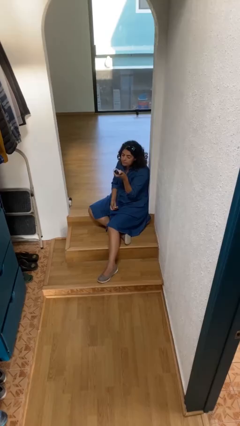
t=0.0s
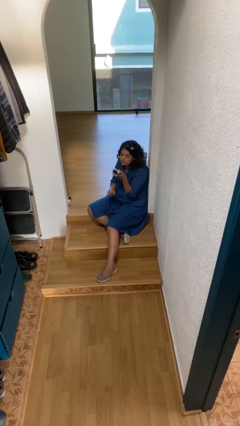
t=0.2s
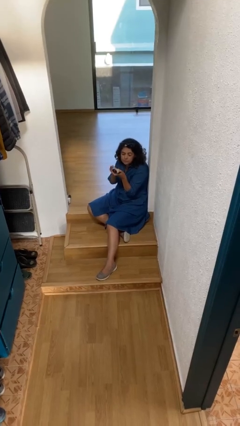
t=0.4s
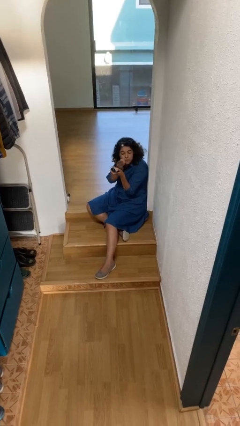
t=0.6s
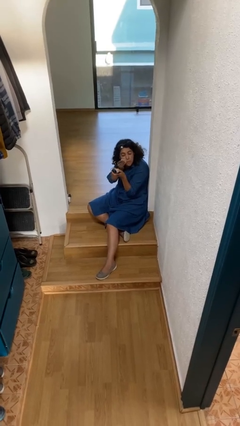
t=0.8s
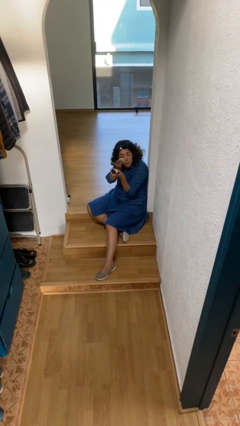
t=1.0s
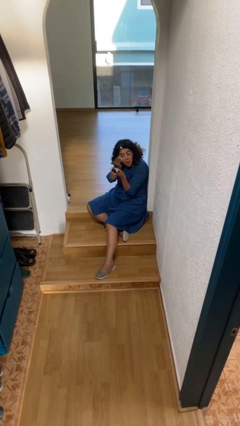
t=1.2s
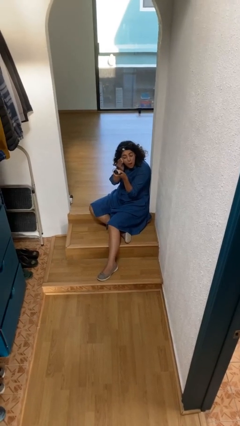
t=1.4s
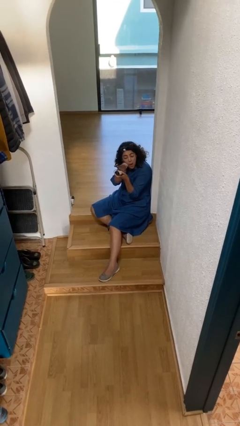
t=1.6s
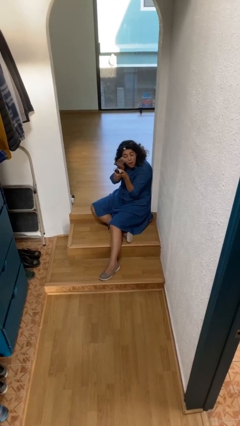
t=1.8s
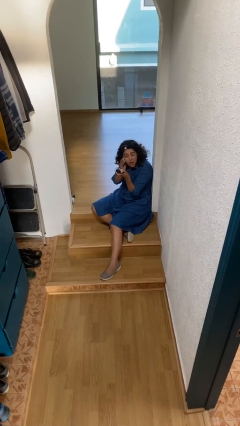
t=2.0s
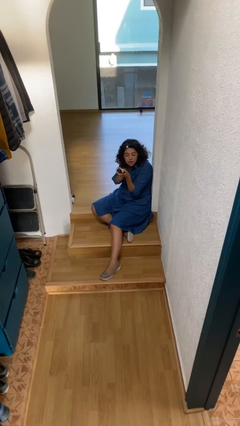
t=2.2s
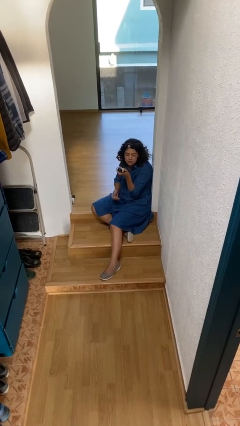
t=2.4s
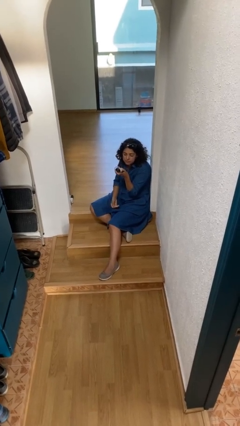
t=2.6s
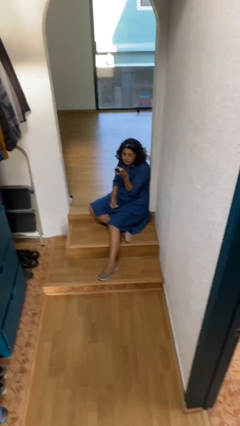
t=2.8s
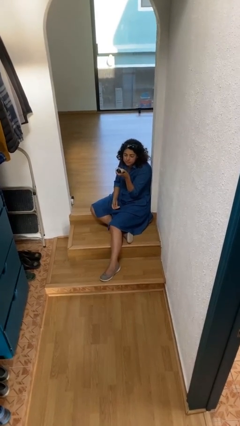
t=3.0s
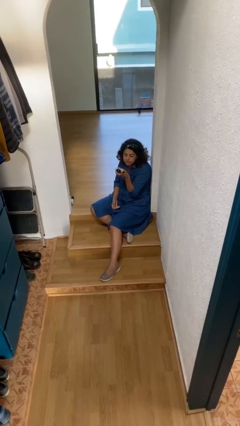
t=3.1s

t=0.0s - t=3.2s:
person applies foundation makeup

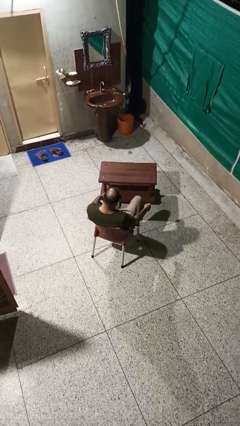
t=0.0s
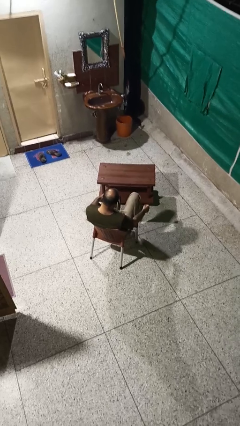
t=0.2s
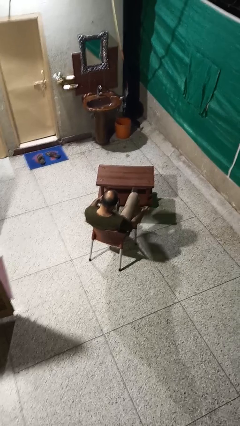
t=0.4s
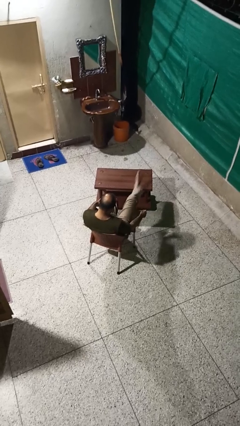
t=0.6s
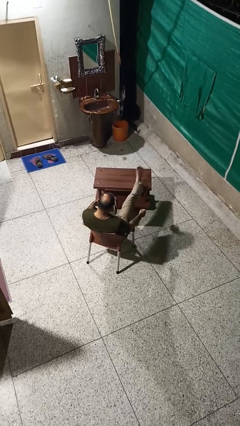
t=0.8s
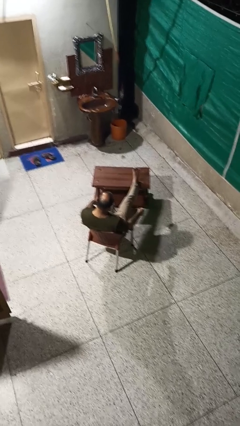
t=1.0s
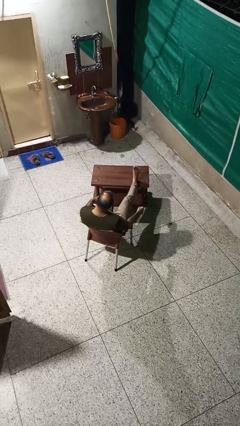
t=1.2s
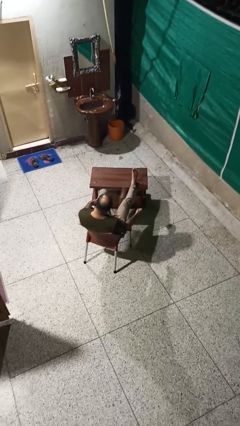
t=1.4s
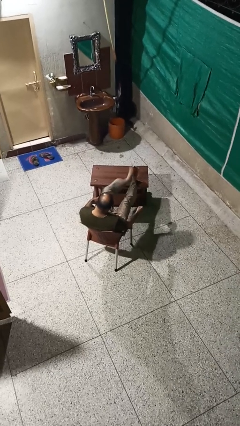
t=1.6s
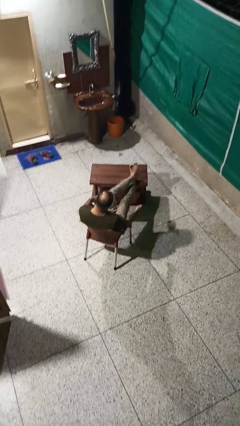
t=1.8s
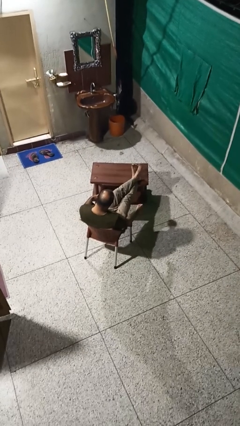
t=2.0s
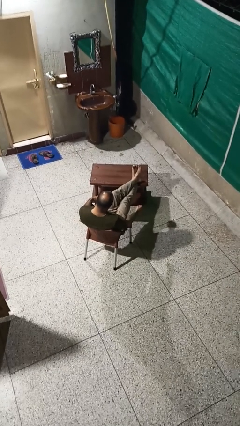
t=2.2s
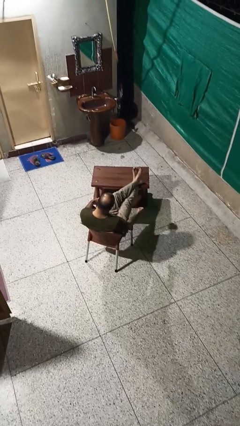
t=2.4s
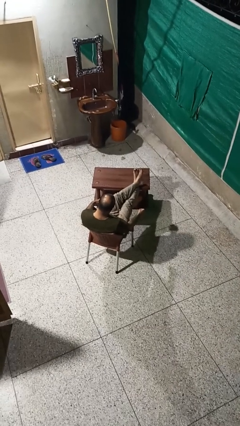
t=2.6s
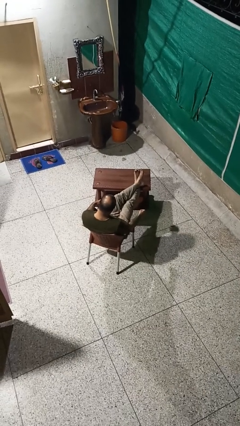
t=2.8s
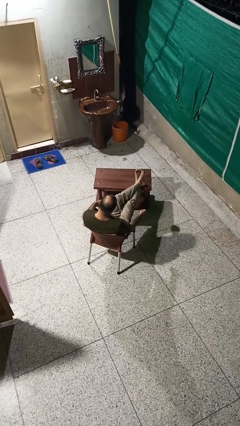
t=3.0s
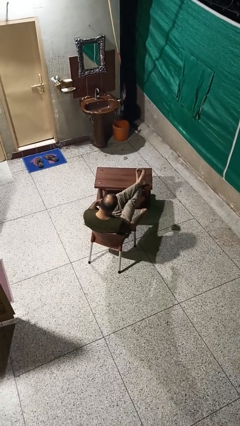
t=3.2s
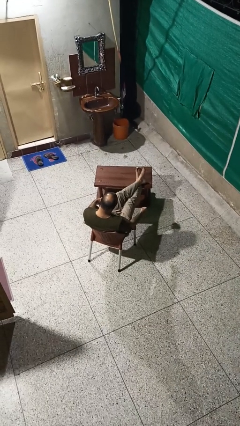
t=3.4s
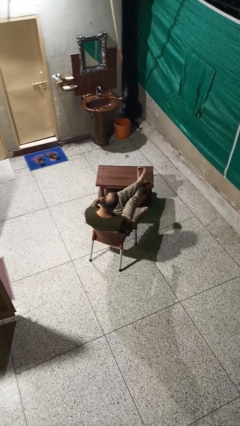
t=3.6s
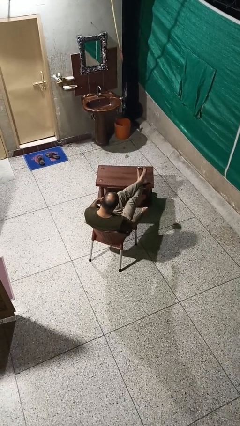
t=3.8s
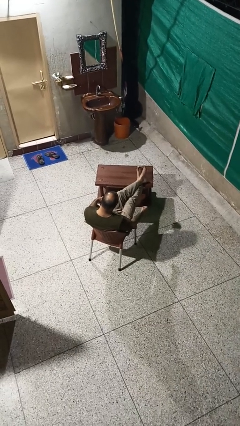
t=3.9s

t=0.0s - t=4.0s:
person puts feet up

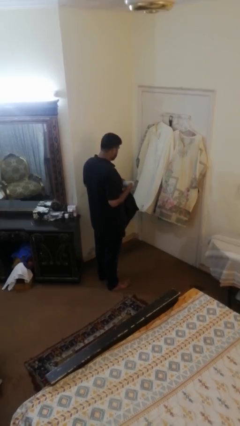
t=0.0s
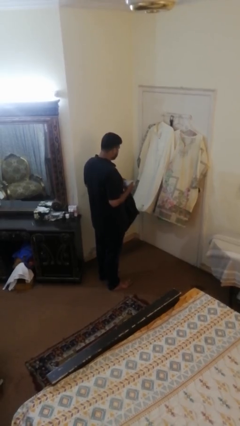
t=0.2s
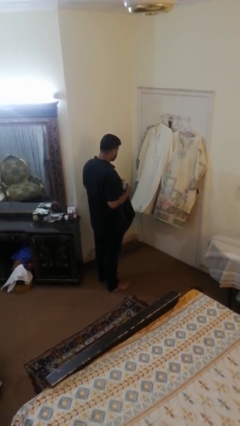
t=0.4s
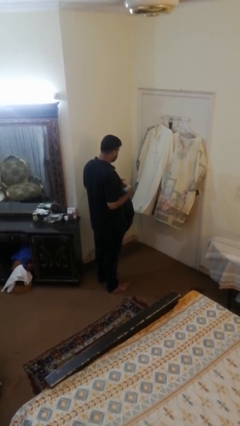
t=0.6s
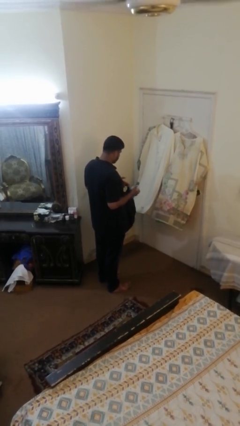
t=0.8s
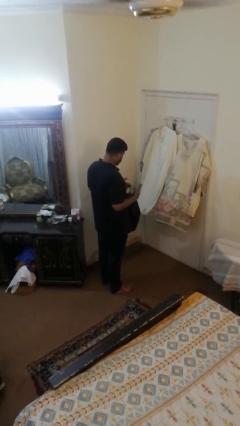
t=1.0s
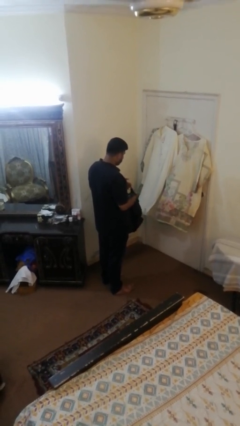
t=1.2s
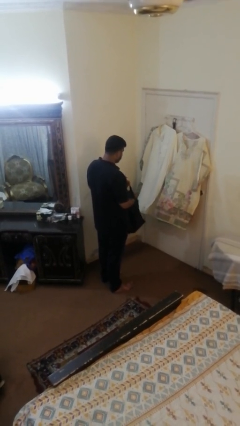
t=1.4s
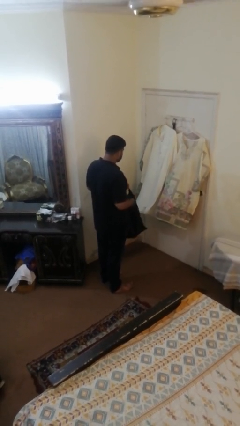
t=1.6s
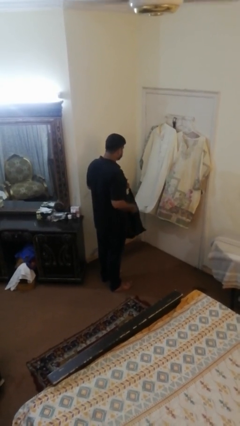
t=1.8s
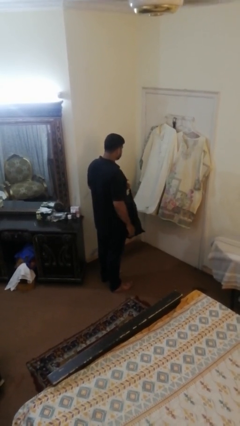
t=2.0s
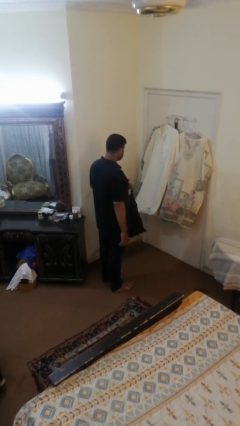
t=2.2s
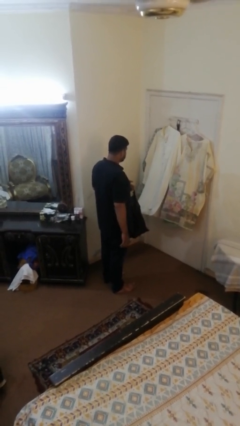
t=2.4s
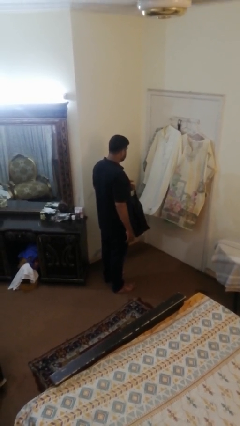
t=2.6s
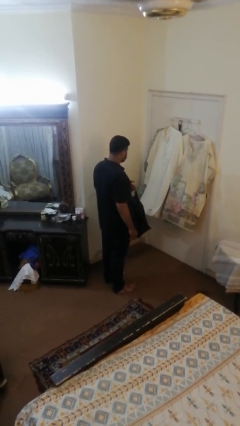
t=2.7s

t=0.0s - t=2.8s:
person puts object into bag

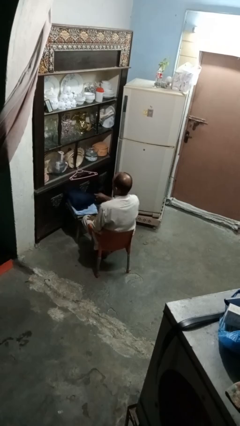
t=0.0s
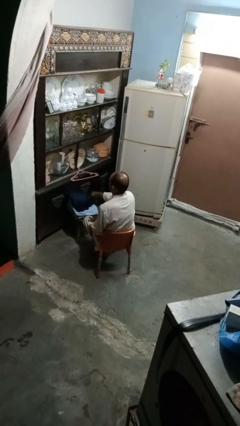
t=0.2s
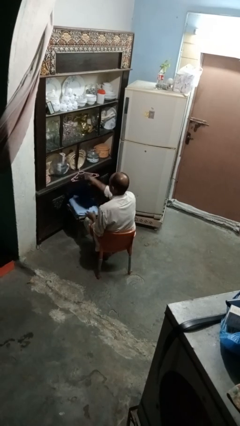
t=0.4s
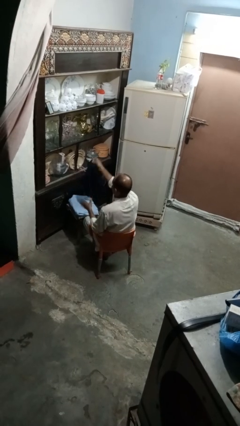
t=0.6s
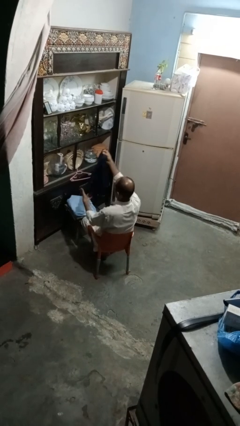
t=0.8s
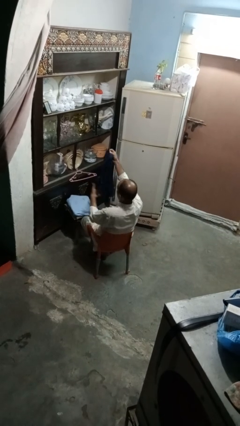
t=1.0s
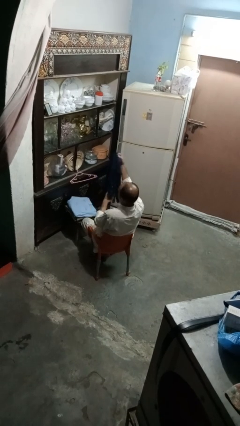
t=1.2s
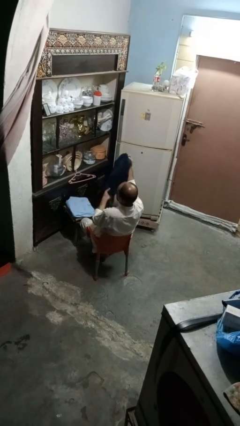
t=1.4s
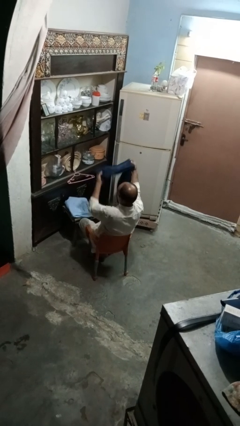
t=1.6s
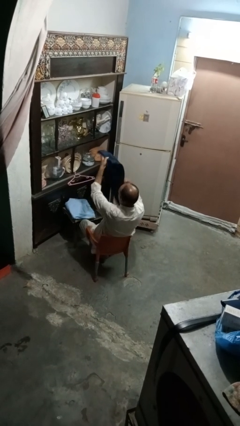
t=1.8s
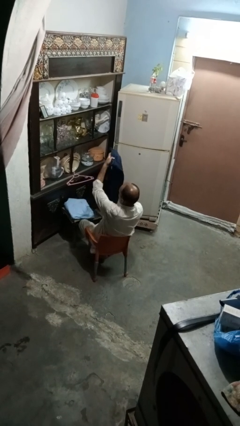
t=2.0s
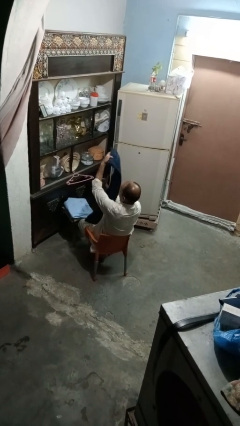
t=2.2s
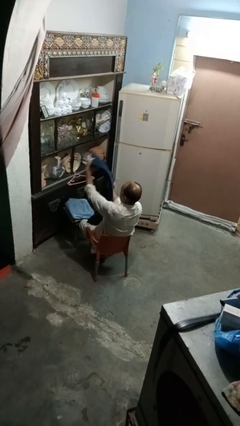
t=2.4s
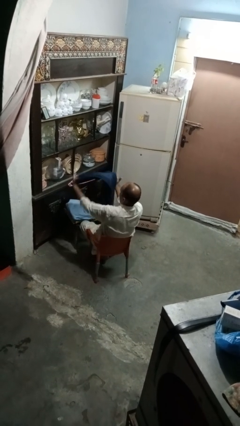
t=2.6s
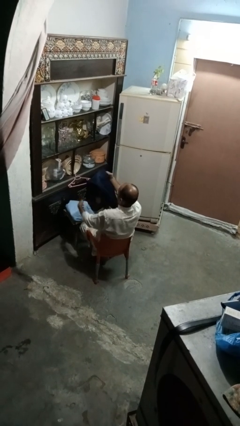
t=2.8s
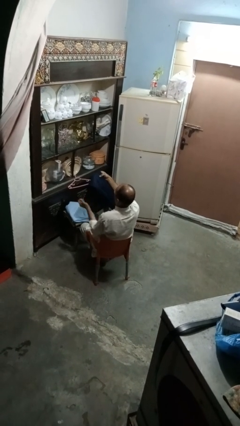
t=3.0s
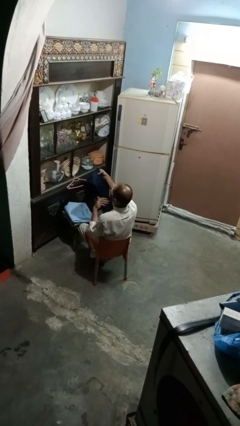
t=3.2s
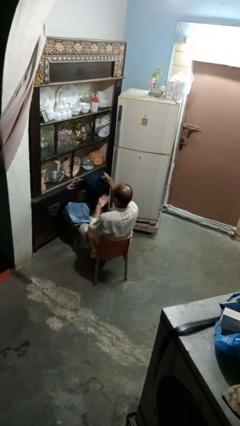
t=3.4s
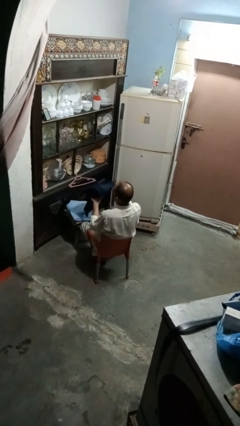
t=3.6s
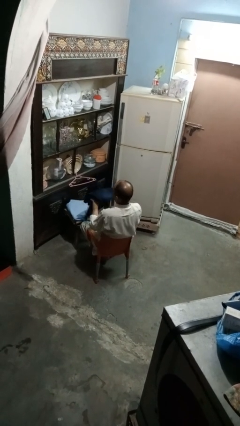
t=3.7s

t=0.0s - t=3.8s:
person folds pants

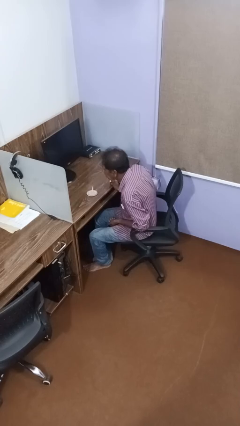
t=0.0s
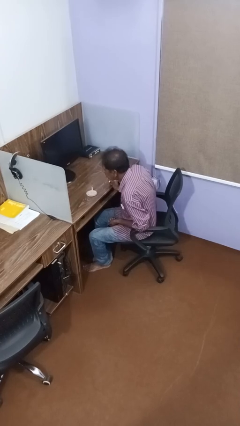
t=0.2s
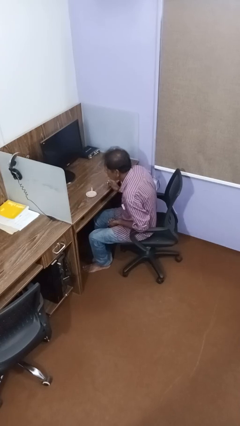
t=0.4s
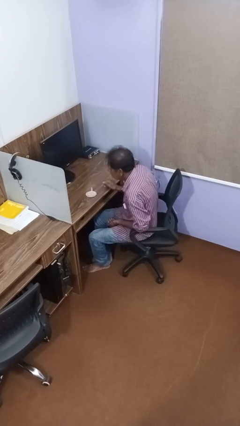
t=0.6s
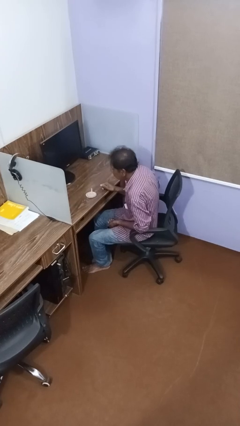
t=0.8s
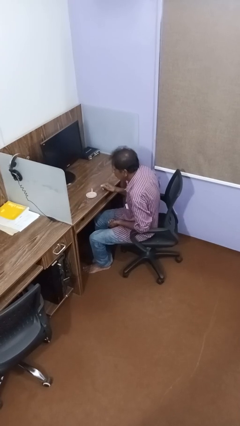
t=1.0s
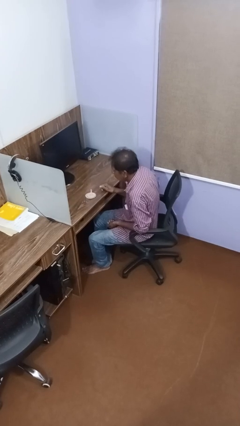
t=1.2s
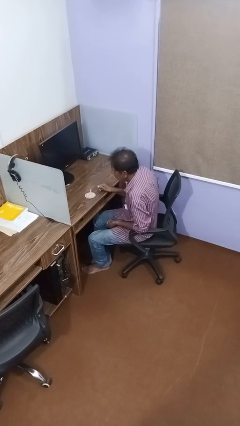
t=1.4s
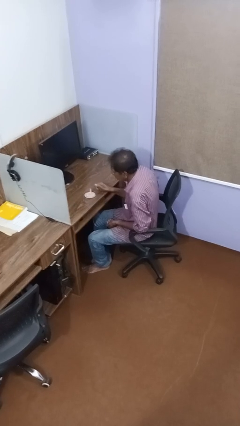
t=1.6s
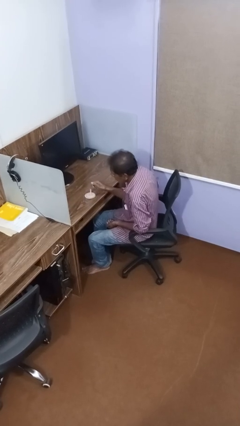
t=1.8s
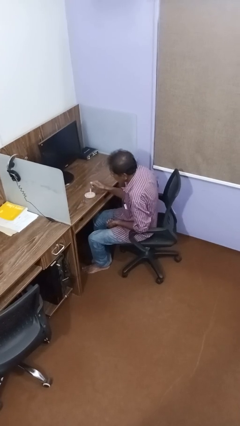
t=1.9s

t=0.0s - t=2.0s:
person extinguishes candle

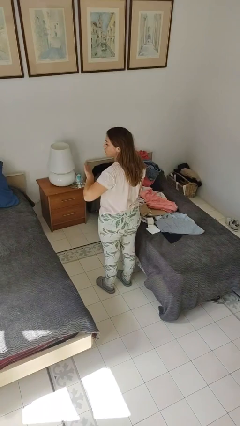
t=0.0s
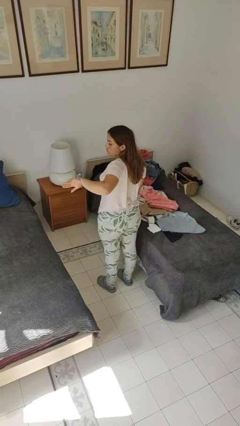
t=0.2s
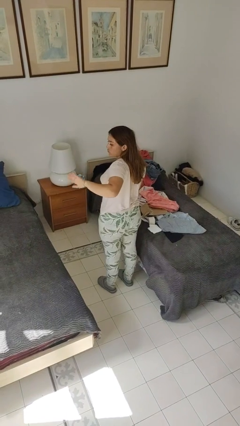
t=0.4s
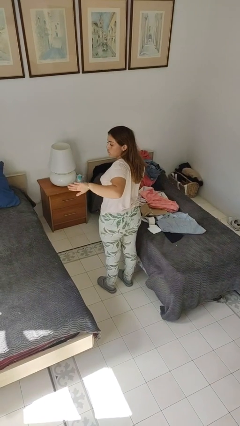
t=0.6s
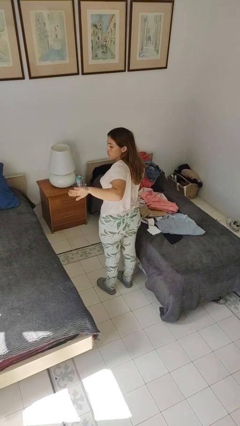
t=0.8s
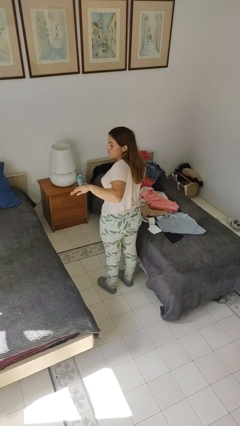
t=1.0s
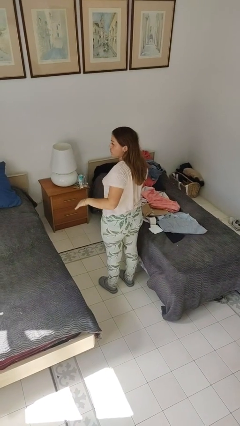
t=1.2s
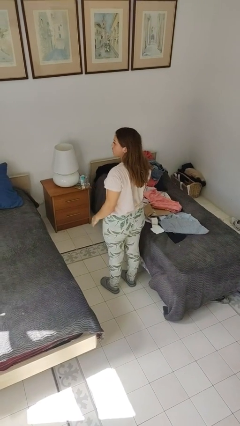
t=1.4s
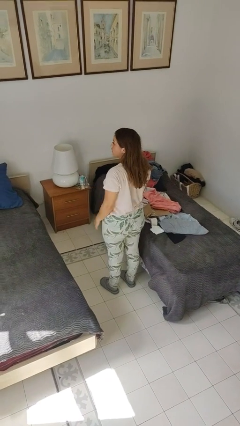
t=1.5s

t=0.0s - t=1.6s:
person gestures behind me

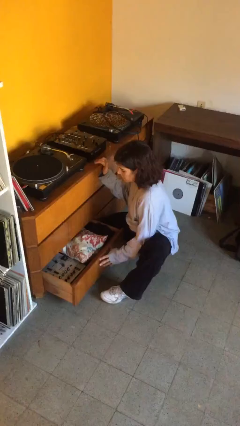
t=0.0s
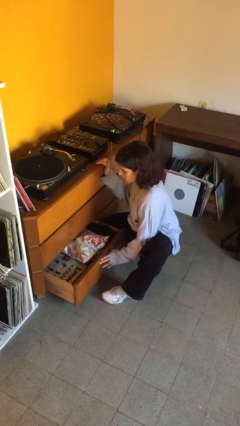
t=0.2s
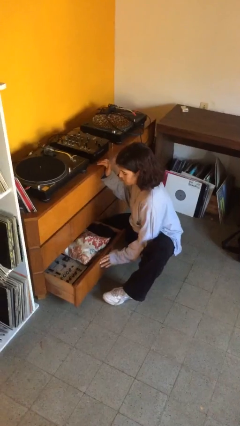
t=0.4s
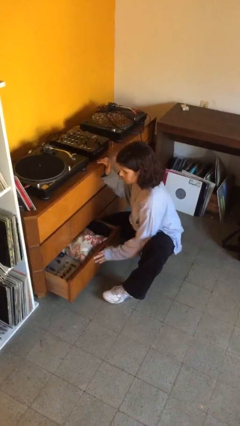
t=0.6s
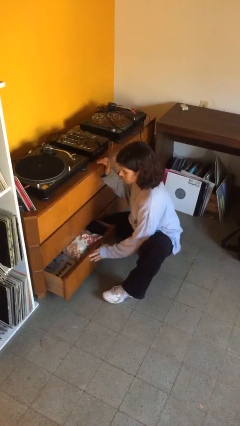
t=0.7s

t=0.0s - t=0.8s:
person closes dresser drawer
